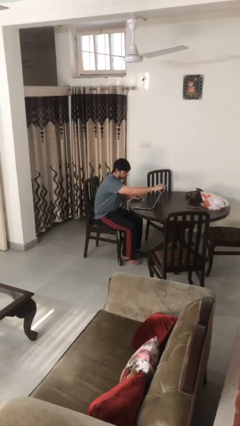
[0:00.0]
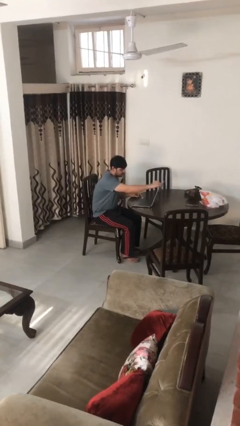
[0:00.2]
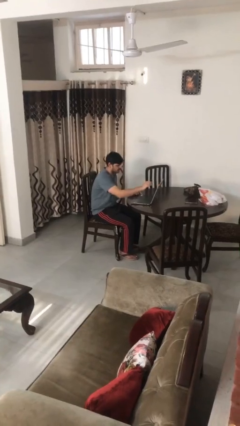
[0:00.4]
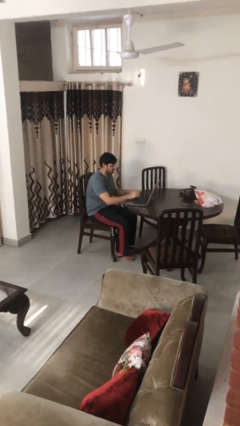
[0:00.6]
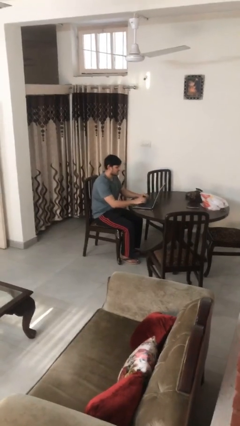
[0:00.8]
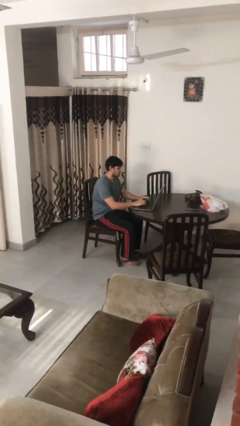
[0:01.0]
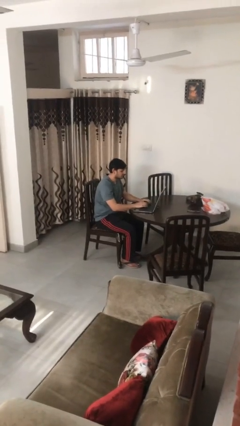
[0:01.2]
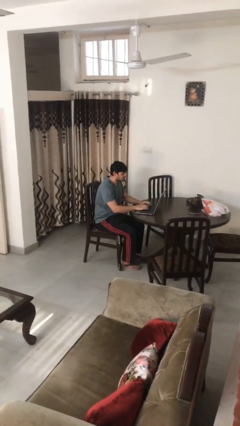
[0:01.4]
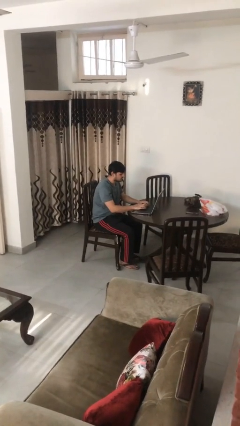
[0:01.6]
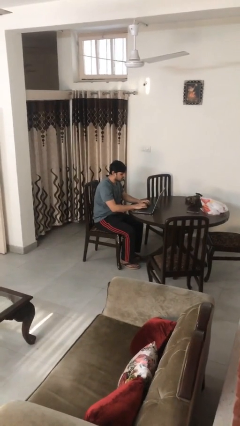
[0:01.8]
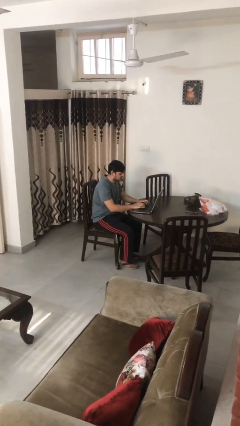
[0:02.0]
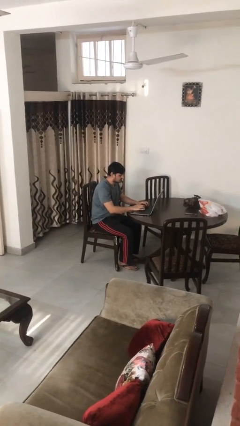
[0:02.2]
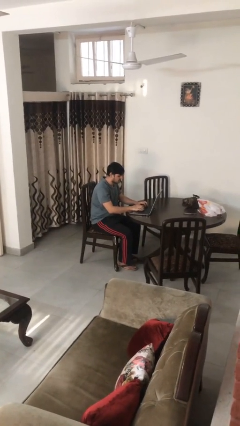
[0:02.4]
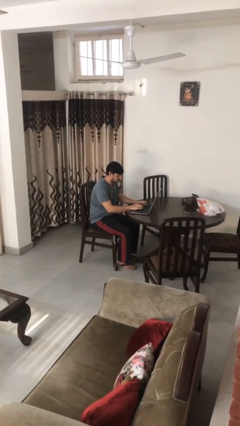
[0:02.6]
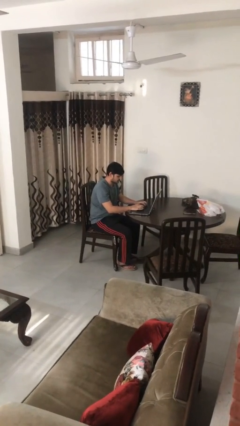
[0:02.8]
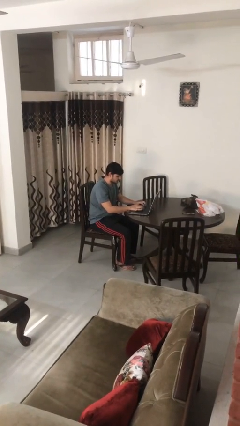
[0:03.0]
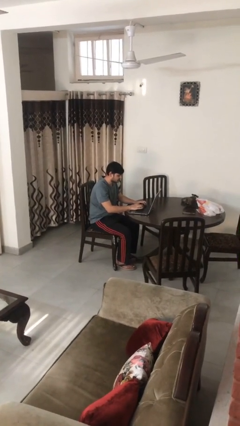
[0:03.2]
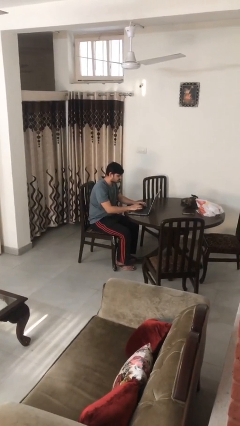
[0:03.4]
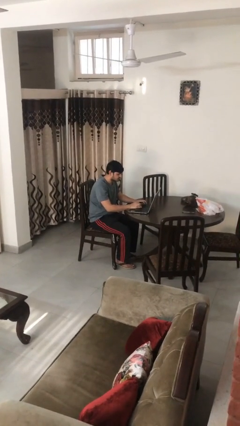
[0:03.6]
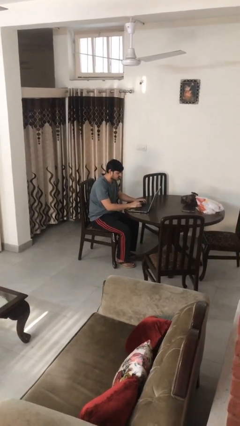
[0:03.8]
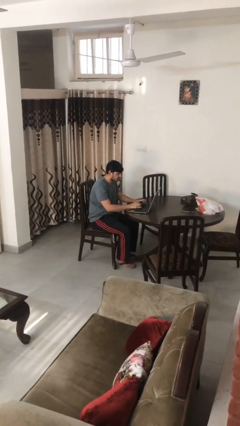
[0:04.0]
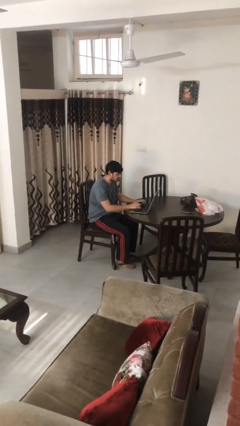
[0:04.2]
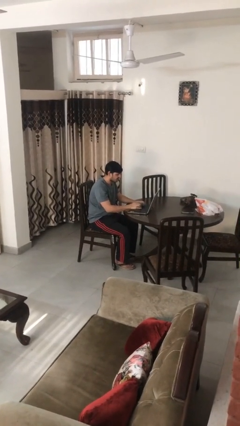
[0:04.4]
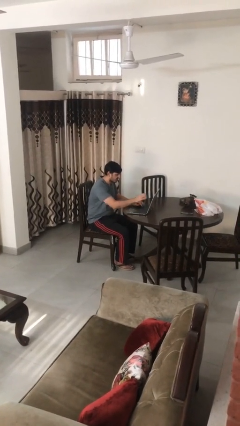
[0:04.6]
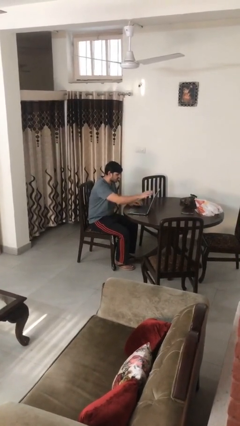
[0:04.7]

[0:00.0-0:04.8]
person interacts with laptop

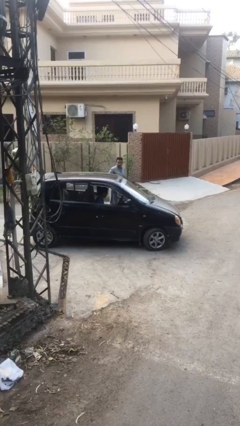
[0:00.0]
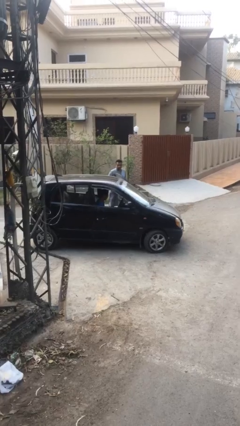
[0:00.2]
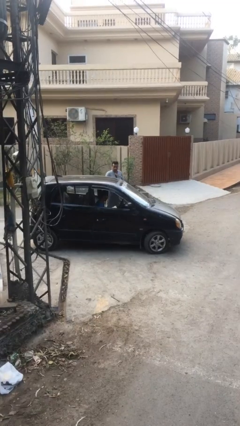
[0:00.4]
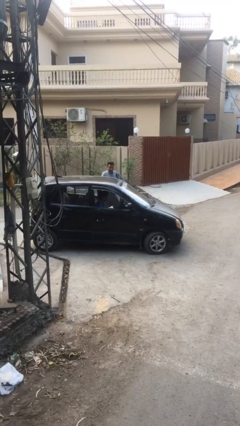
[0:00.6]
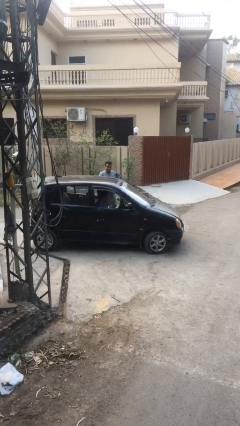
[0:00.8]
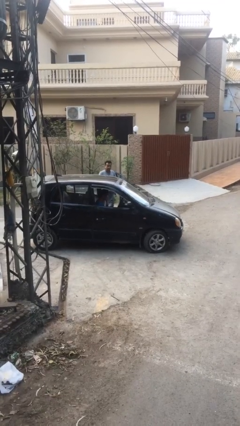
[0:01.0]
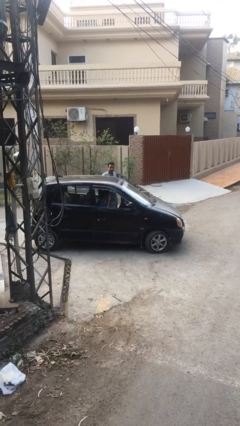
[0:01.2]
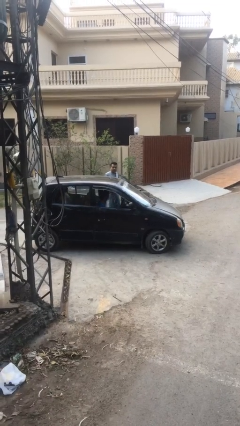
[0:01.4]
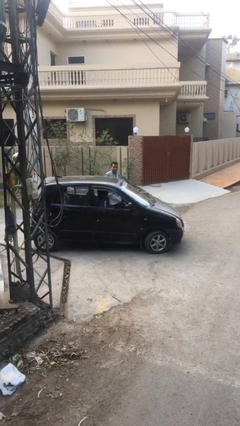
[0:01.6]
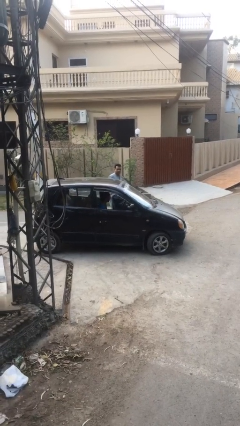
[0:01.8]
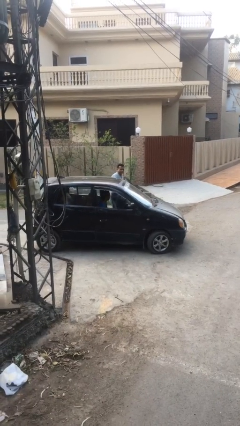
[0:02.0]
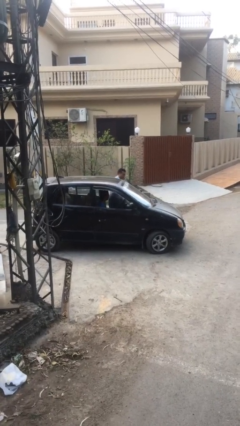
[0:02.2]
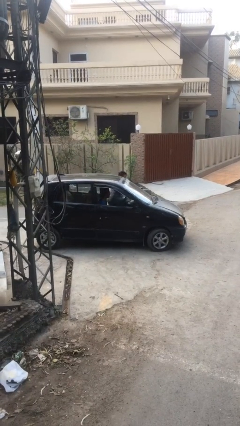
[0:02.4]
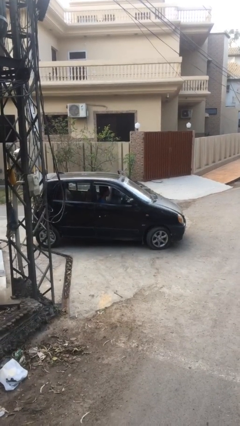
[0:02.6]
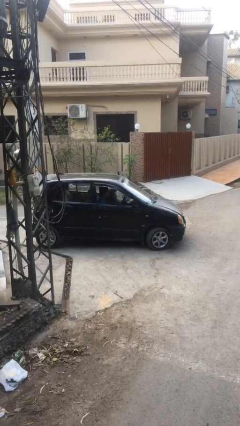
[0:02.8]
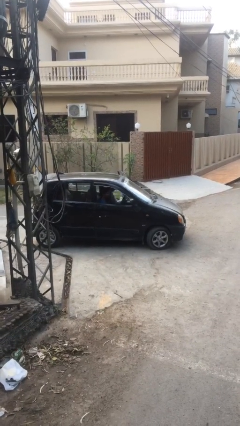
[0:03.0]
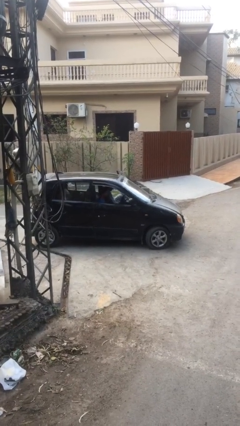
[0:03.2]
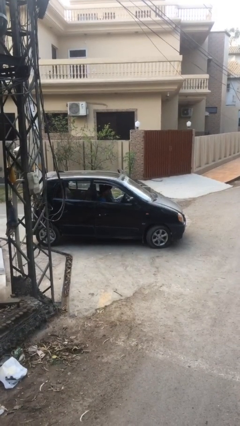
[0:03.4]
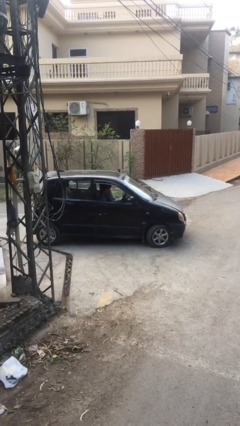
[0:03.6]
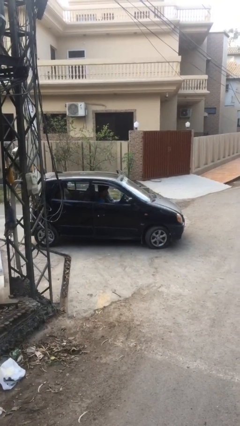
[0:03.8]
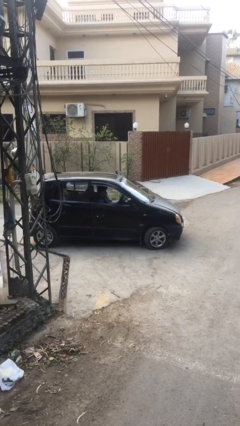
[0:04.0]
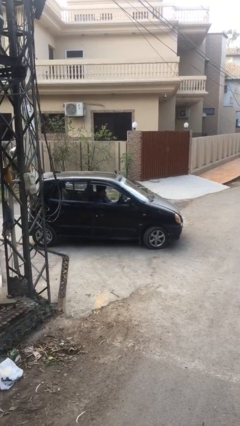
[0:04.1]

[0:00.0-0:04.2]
car picks up person

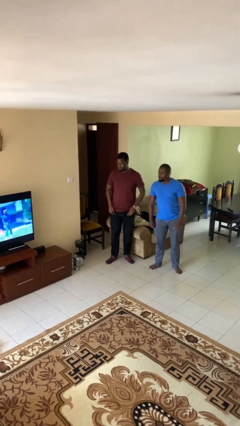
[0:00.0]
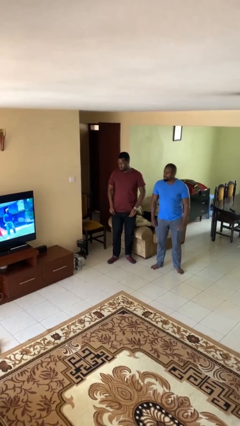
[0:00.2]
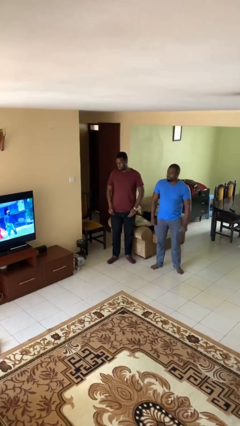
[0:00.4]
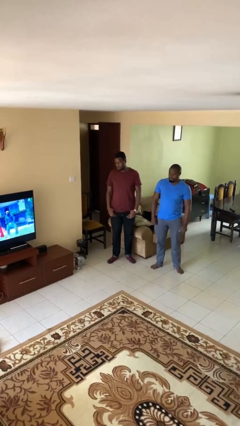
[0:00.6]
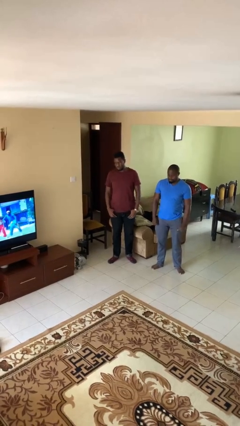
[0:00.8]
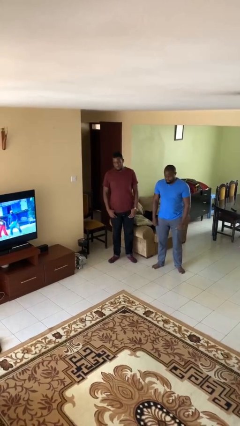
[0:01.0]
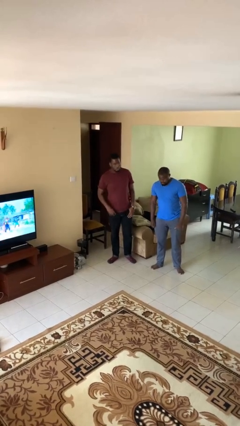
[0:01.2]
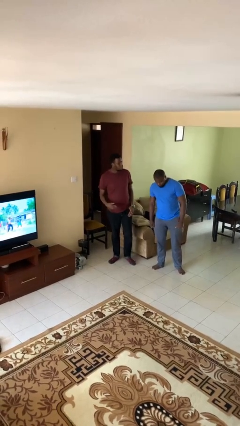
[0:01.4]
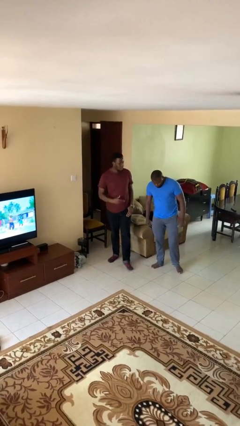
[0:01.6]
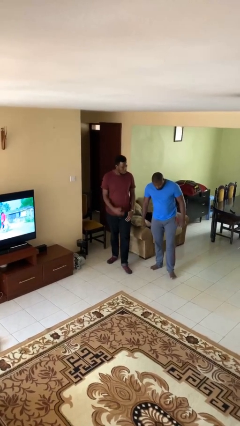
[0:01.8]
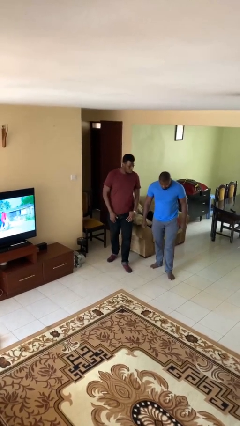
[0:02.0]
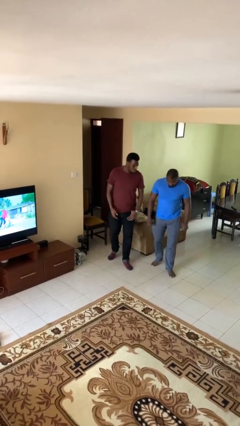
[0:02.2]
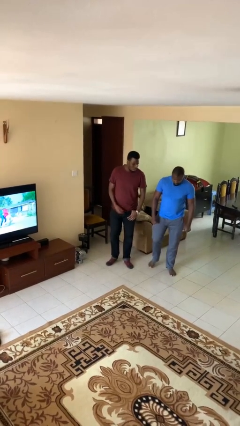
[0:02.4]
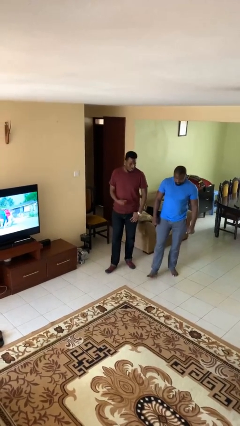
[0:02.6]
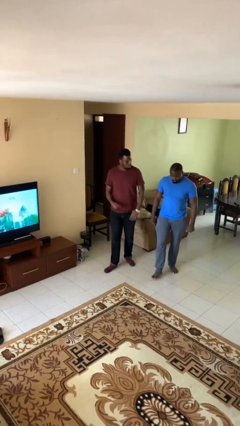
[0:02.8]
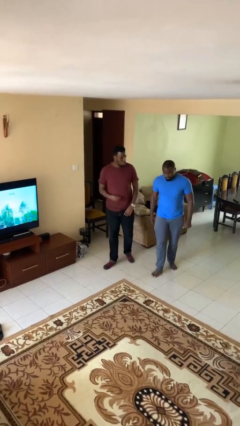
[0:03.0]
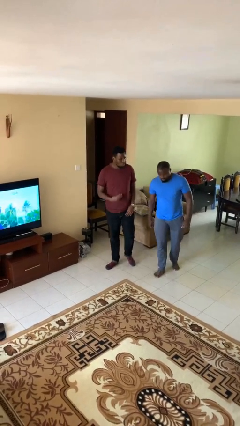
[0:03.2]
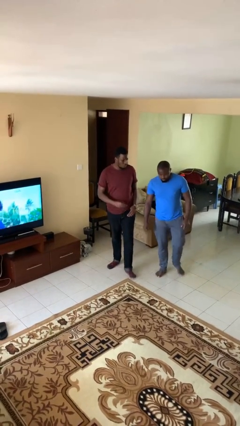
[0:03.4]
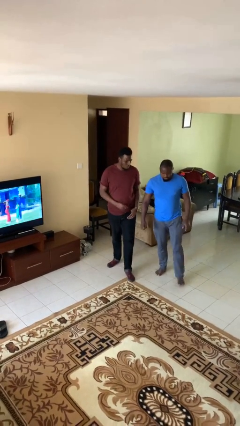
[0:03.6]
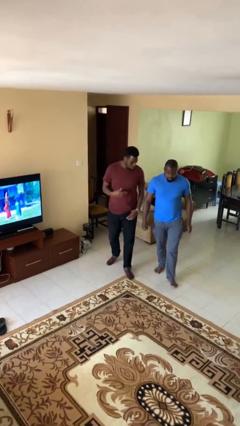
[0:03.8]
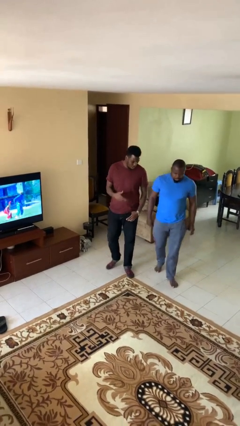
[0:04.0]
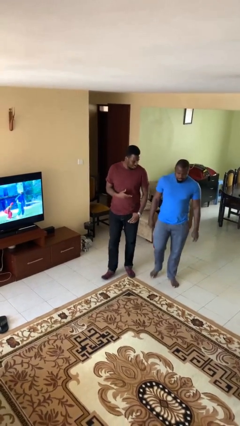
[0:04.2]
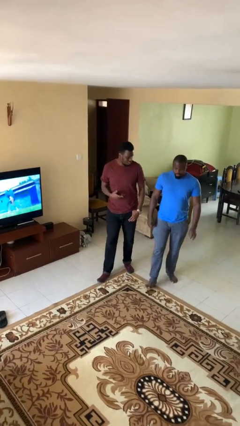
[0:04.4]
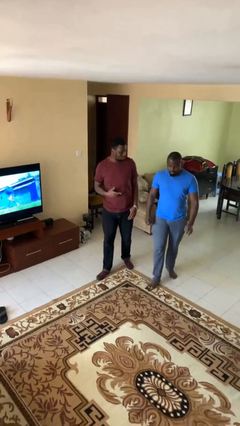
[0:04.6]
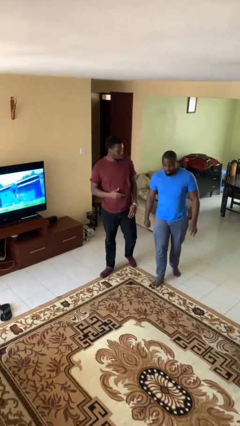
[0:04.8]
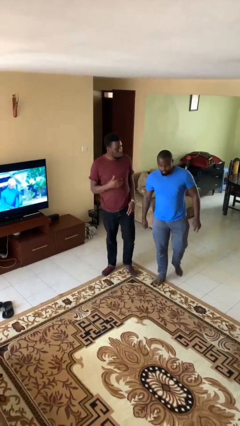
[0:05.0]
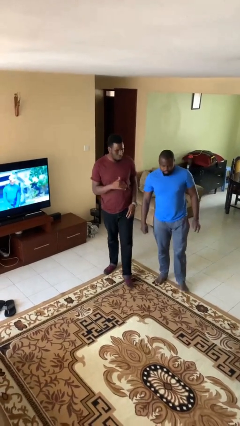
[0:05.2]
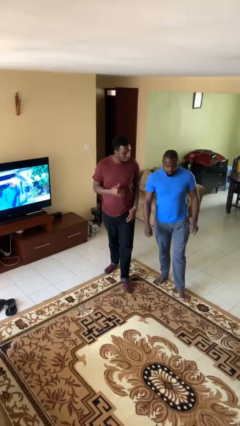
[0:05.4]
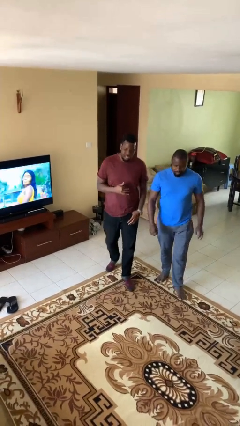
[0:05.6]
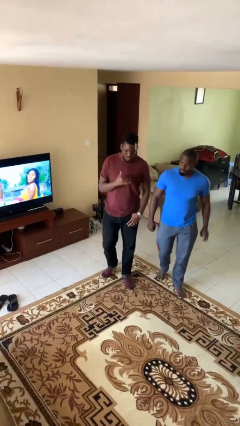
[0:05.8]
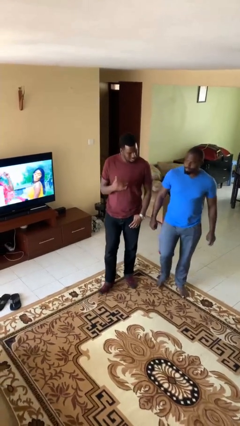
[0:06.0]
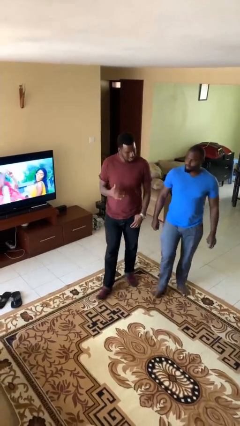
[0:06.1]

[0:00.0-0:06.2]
person talks to person

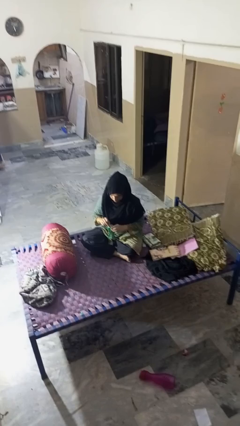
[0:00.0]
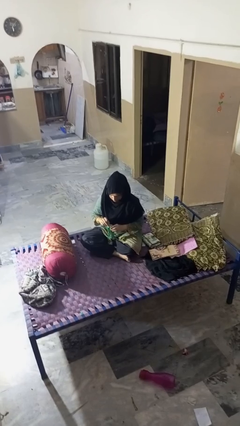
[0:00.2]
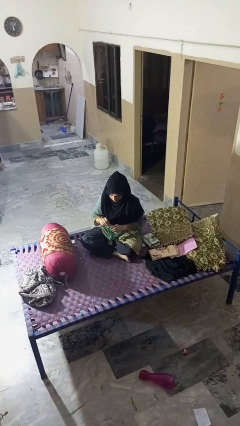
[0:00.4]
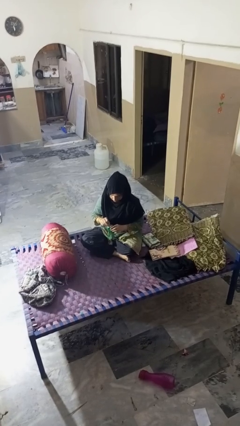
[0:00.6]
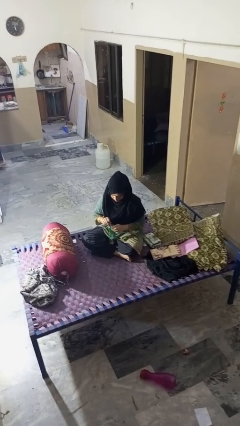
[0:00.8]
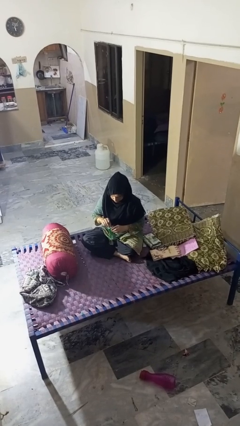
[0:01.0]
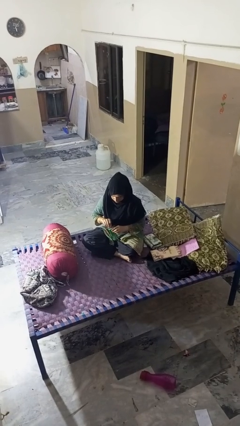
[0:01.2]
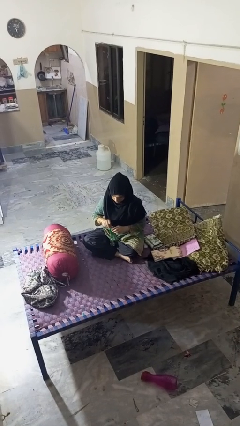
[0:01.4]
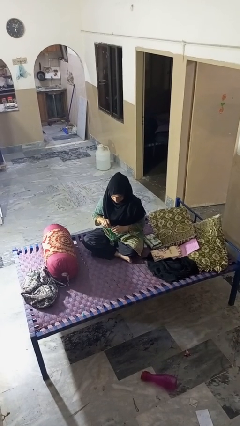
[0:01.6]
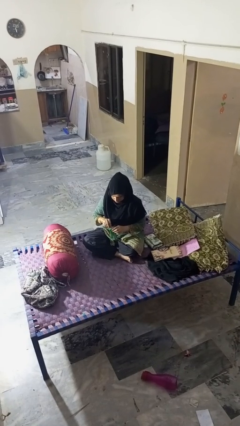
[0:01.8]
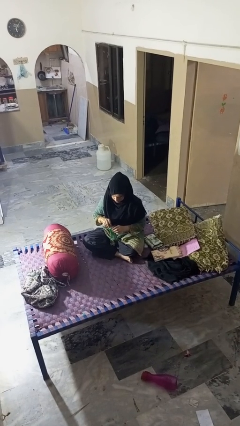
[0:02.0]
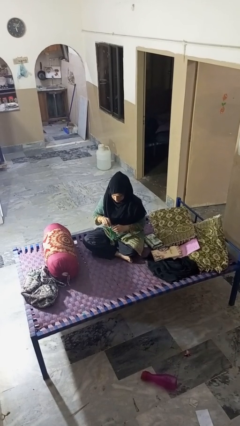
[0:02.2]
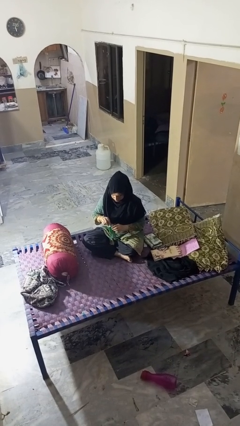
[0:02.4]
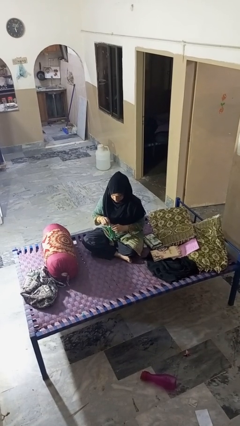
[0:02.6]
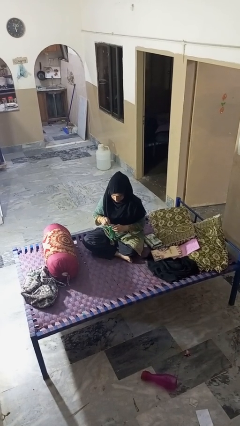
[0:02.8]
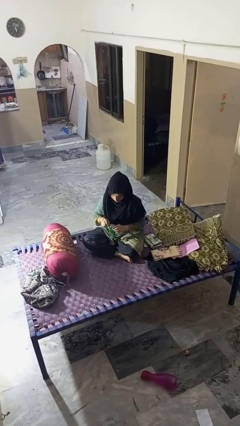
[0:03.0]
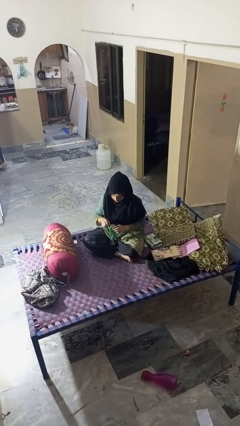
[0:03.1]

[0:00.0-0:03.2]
person opens can with can opener
